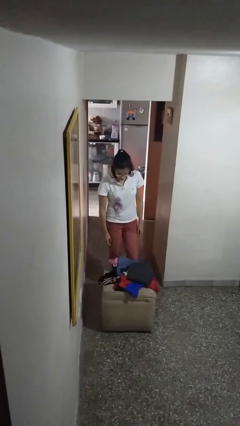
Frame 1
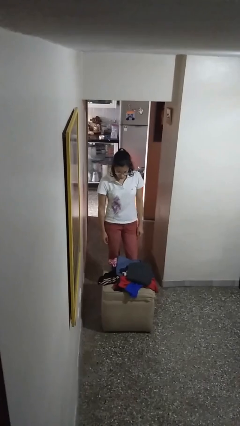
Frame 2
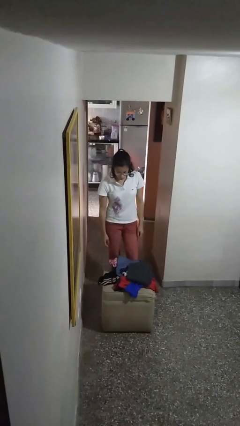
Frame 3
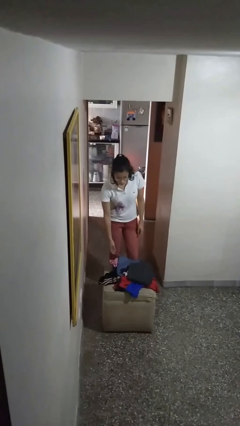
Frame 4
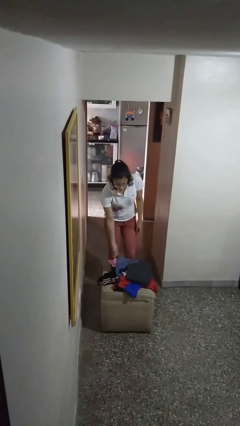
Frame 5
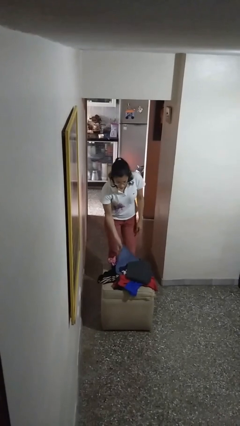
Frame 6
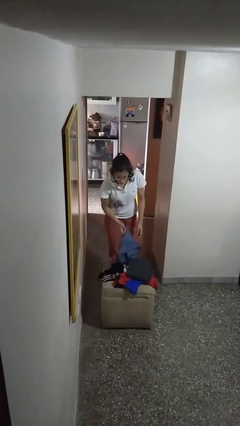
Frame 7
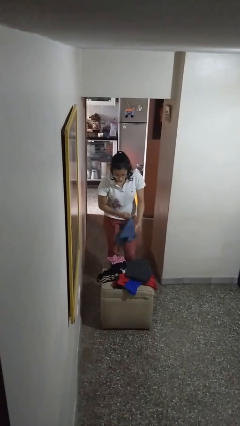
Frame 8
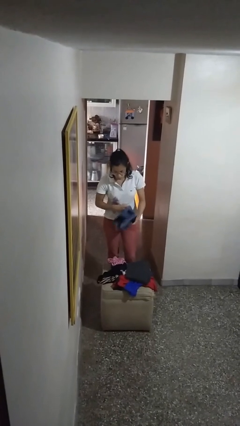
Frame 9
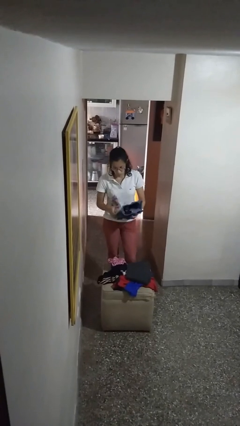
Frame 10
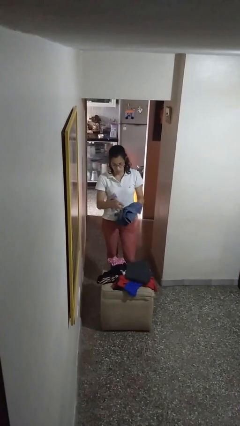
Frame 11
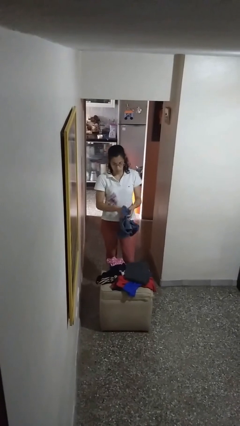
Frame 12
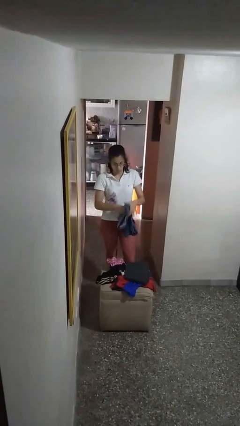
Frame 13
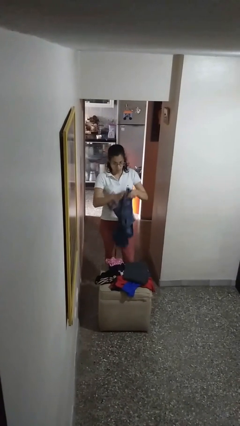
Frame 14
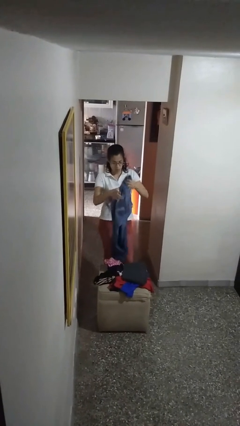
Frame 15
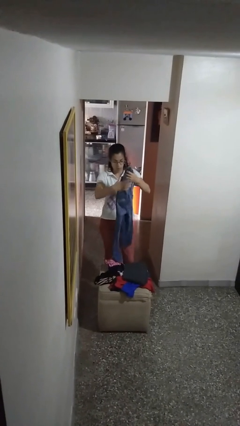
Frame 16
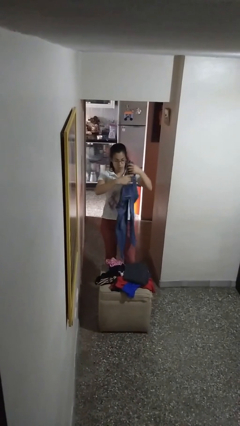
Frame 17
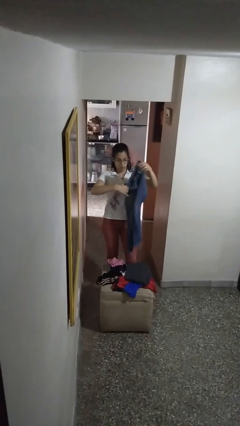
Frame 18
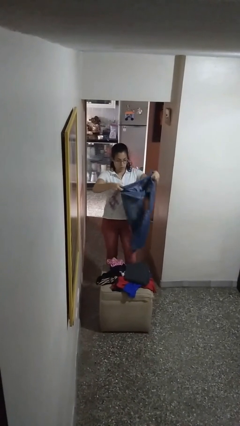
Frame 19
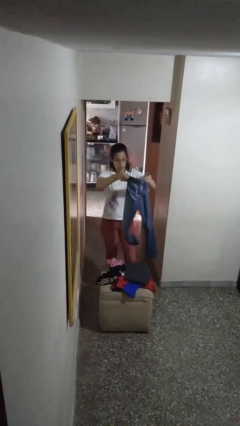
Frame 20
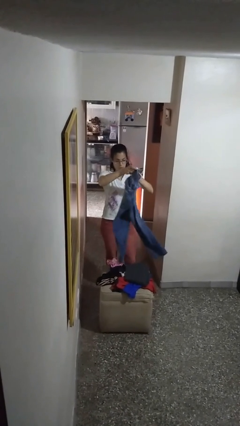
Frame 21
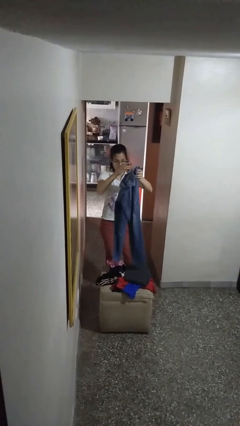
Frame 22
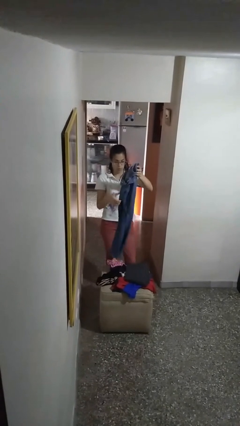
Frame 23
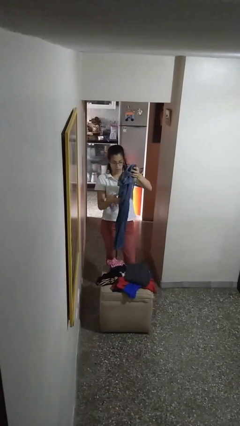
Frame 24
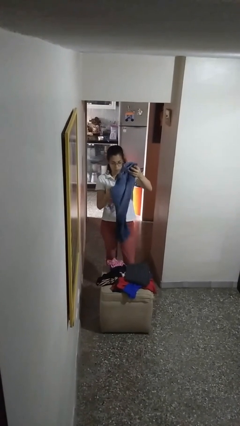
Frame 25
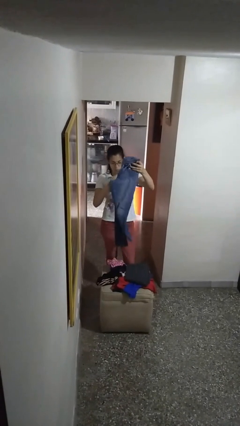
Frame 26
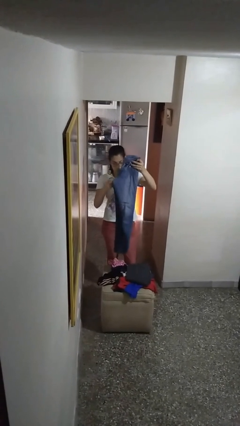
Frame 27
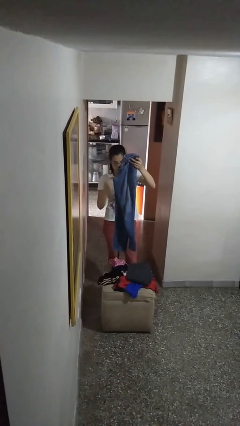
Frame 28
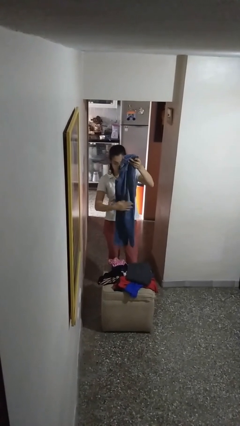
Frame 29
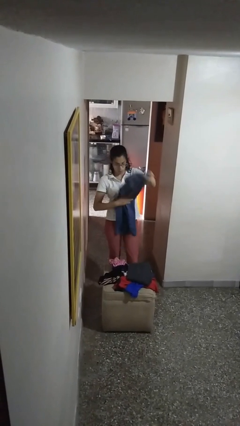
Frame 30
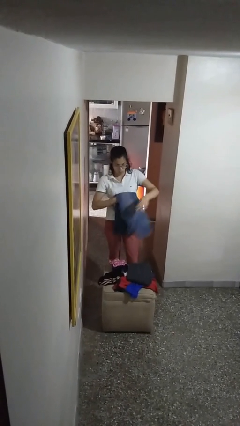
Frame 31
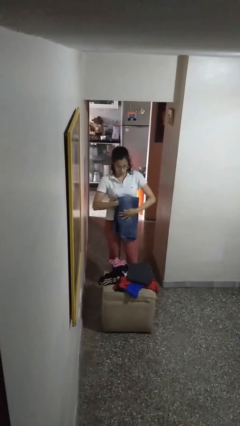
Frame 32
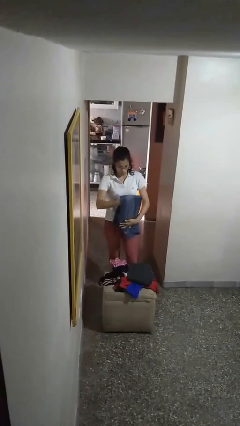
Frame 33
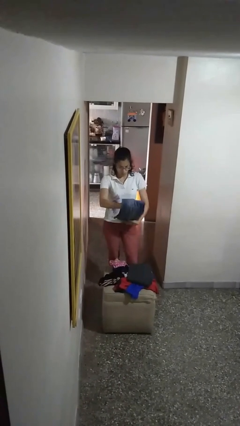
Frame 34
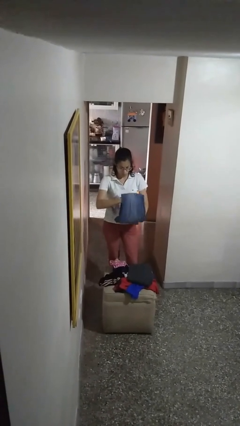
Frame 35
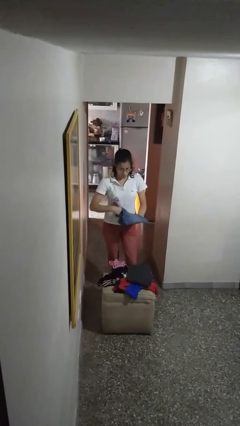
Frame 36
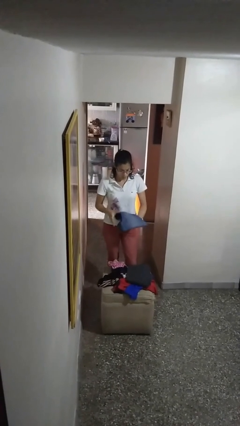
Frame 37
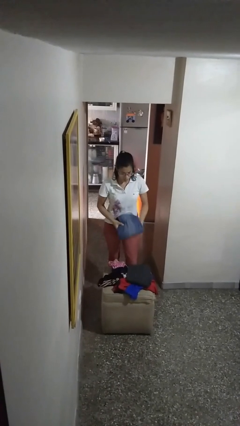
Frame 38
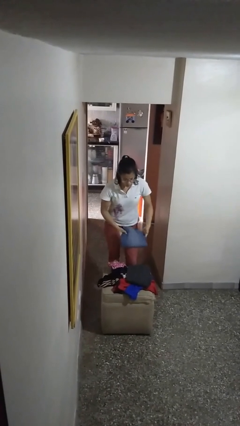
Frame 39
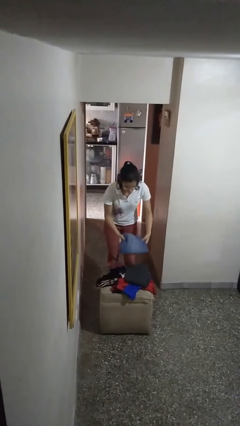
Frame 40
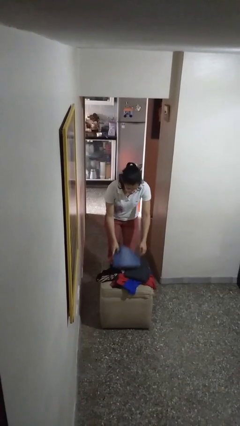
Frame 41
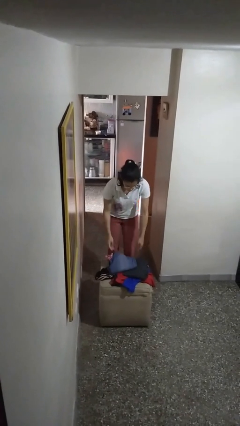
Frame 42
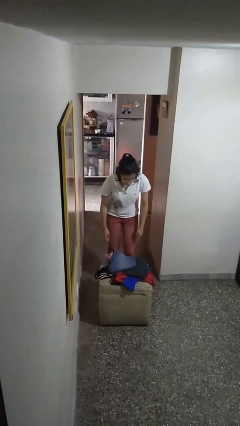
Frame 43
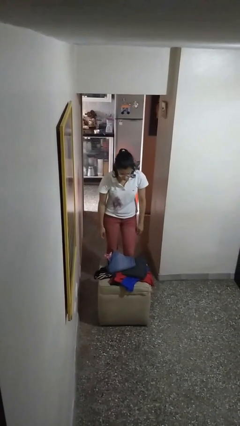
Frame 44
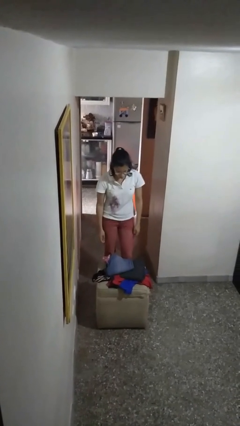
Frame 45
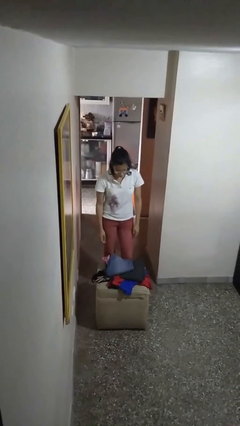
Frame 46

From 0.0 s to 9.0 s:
person folds pants

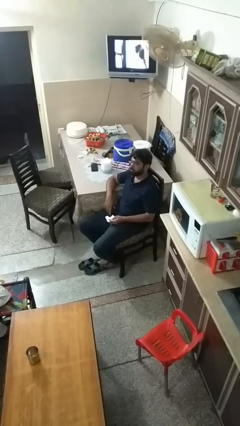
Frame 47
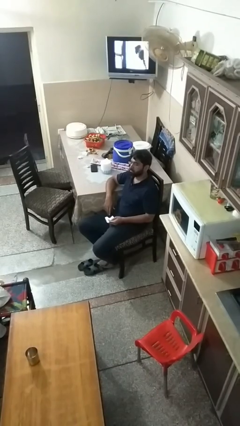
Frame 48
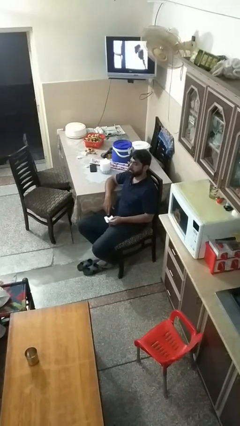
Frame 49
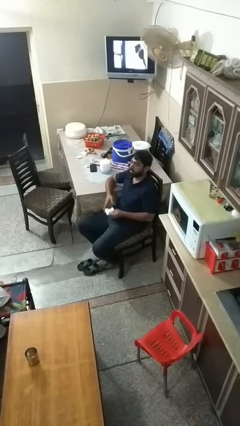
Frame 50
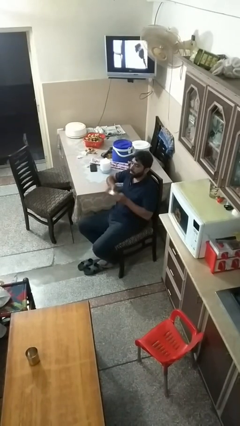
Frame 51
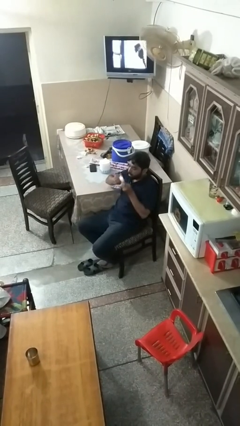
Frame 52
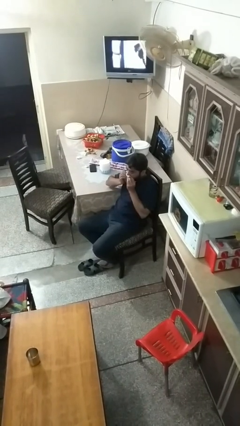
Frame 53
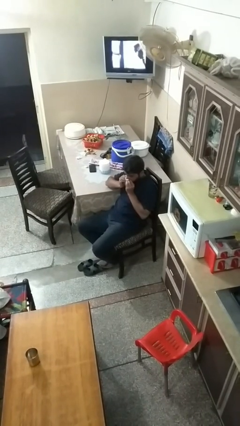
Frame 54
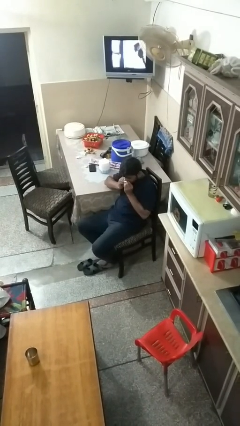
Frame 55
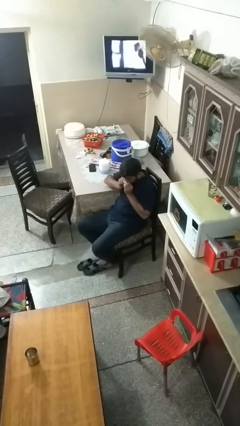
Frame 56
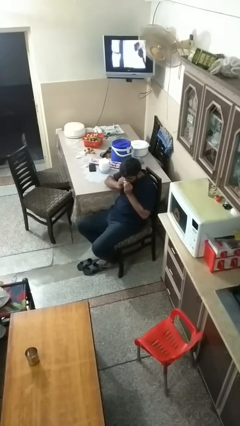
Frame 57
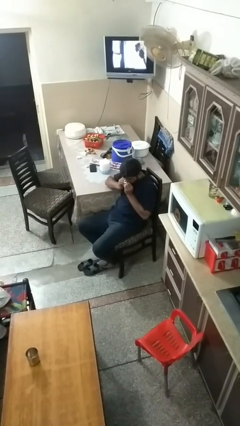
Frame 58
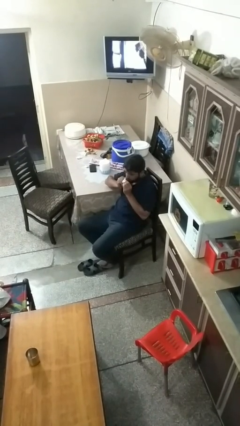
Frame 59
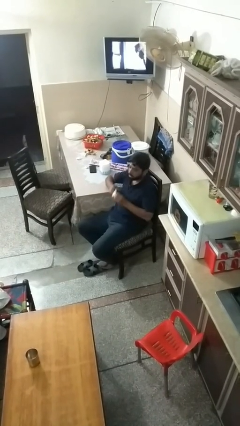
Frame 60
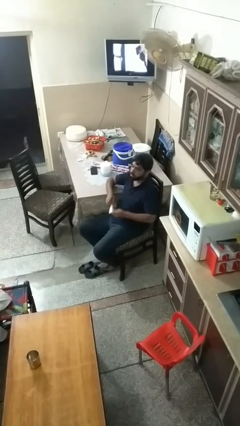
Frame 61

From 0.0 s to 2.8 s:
person blows nose

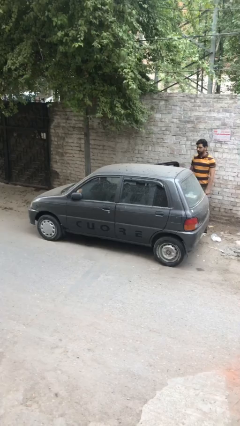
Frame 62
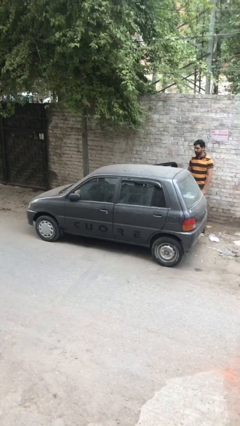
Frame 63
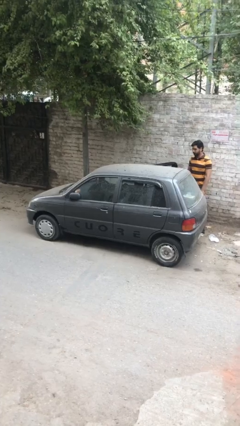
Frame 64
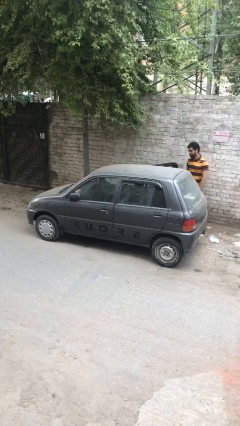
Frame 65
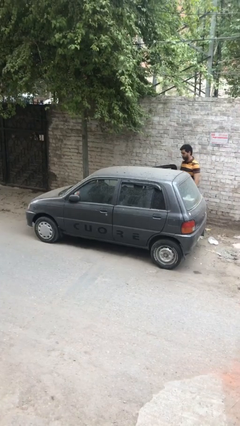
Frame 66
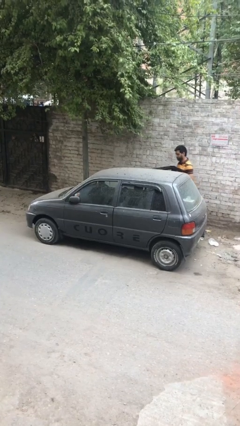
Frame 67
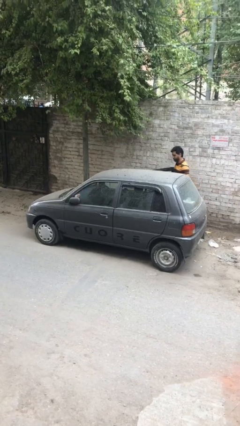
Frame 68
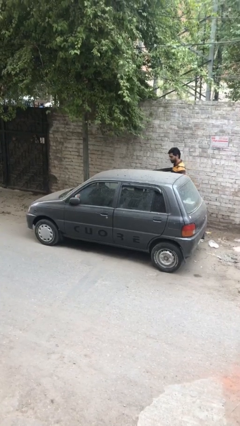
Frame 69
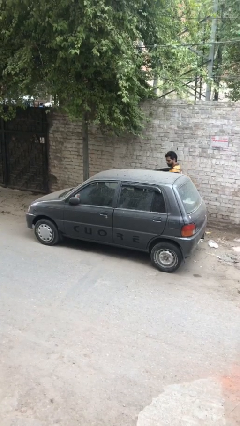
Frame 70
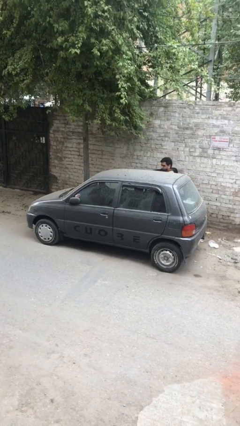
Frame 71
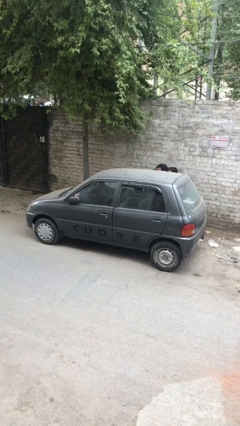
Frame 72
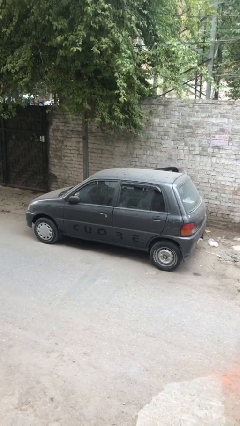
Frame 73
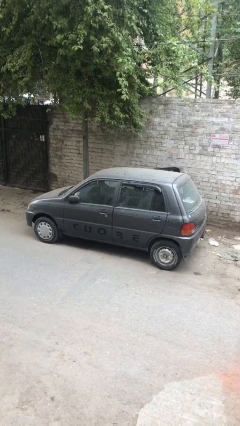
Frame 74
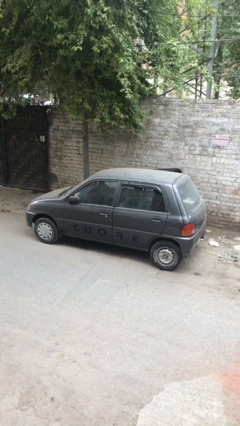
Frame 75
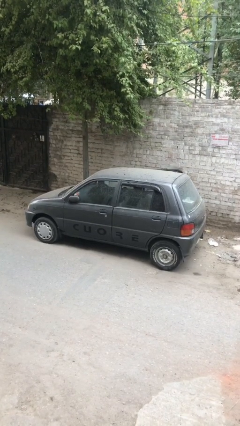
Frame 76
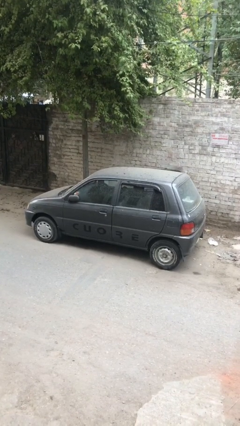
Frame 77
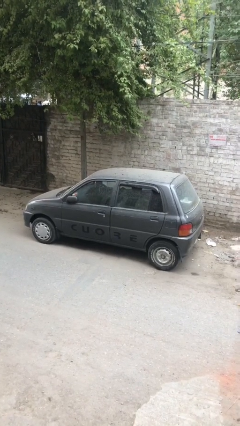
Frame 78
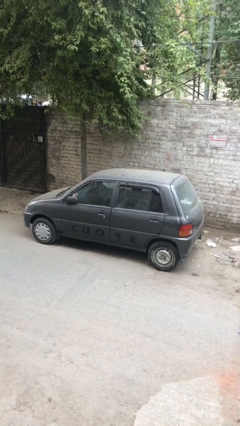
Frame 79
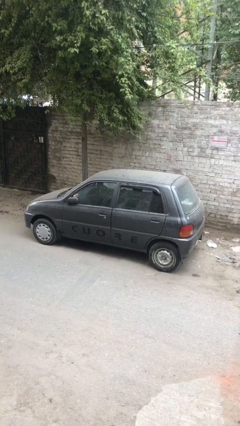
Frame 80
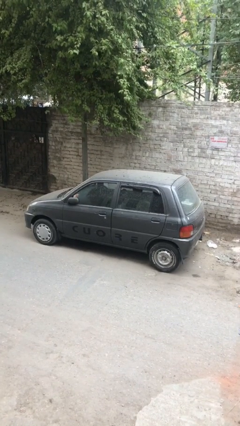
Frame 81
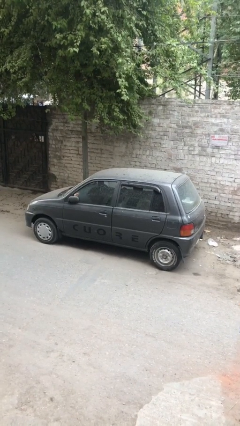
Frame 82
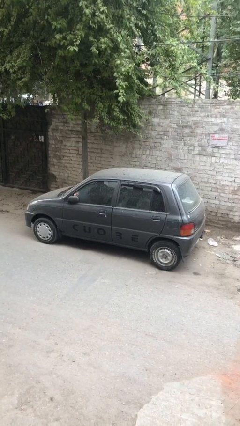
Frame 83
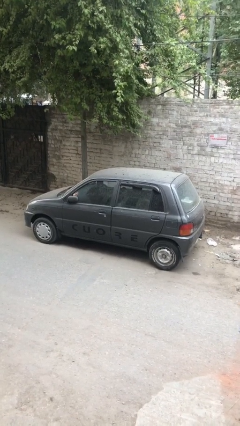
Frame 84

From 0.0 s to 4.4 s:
car picks up person

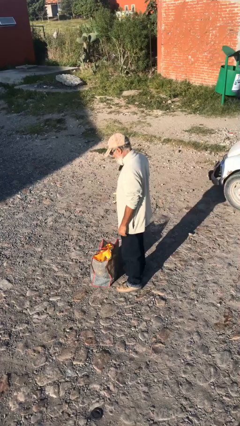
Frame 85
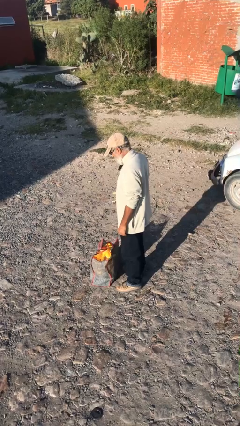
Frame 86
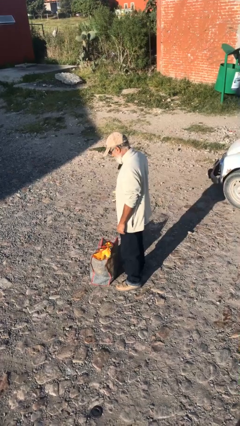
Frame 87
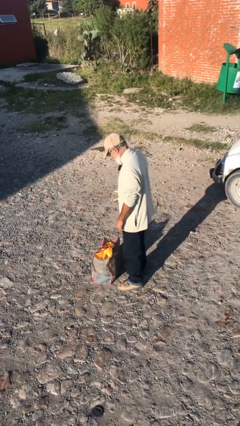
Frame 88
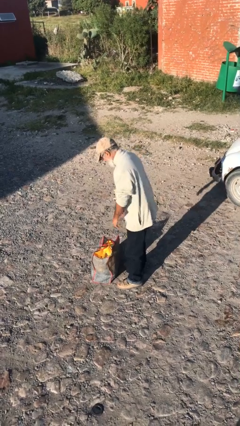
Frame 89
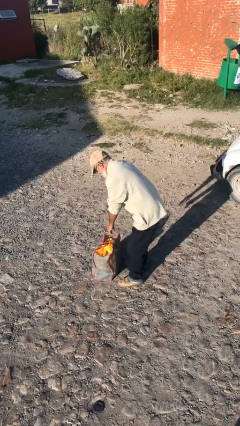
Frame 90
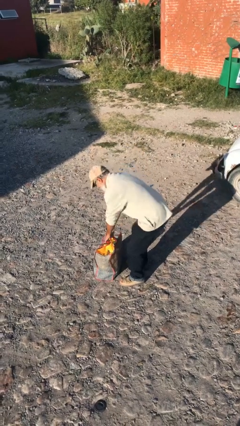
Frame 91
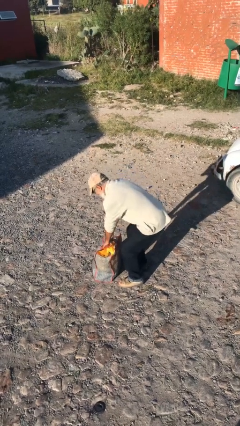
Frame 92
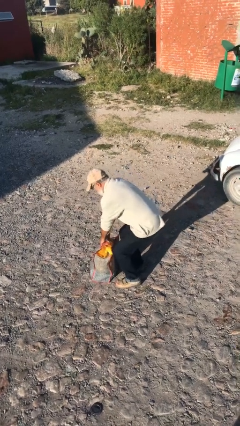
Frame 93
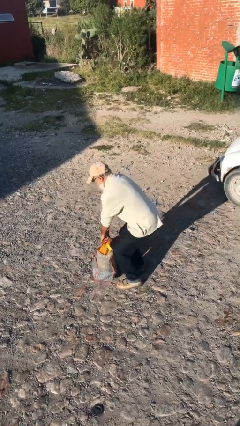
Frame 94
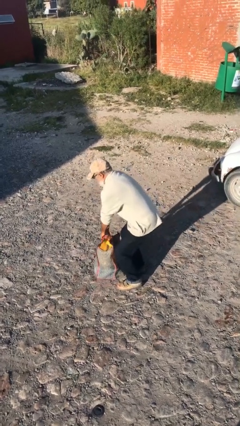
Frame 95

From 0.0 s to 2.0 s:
person picks up object from floor
